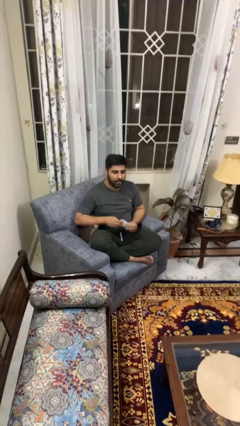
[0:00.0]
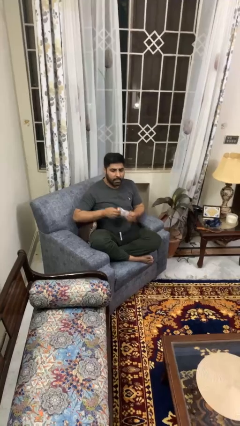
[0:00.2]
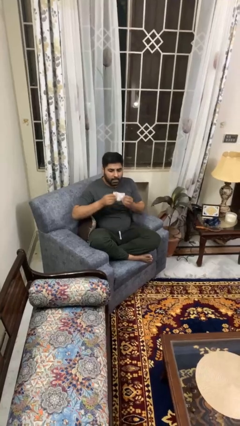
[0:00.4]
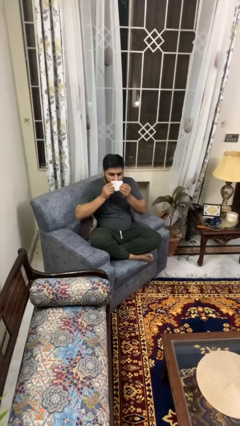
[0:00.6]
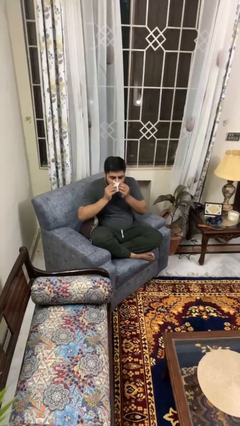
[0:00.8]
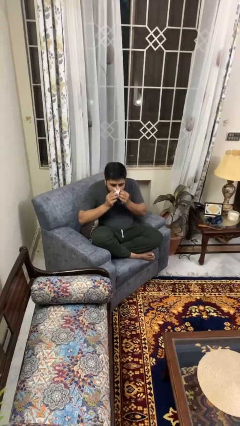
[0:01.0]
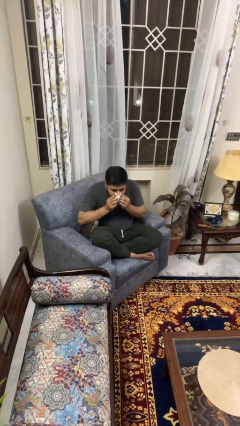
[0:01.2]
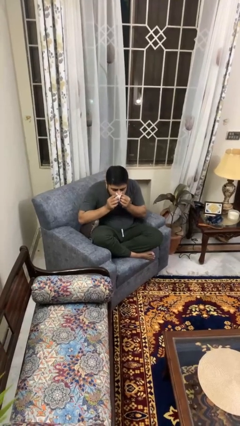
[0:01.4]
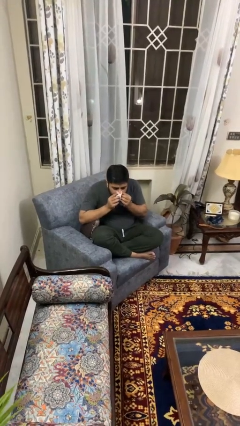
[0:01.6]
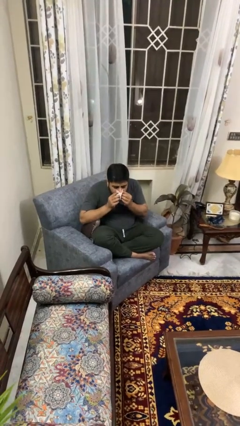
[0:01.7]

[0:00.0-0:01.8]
person blows nose

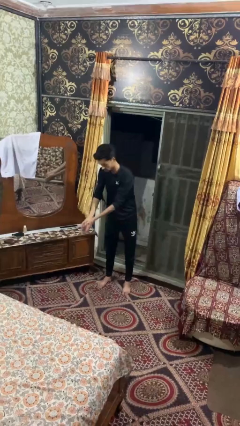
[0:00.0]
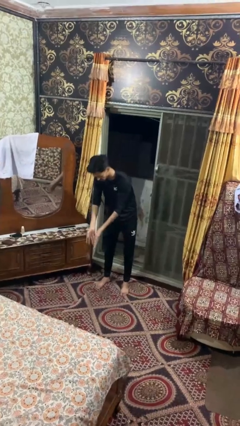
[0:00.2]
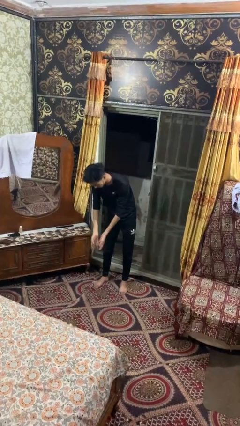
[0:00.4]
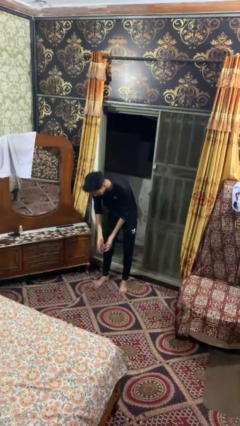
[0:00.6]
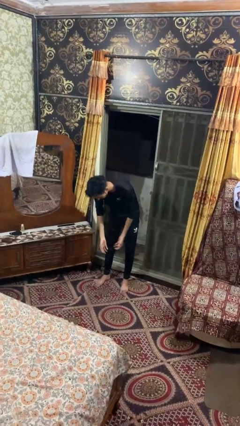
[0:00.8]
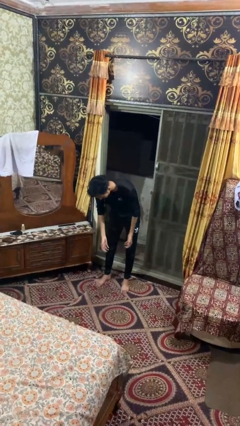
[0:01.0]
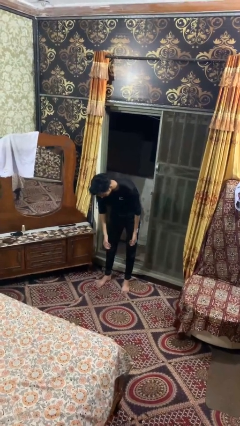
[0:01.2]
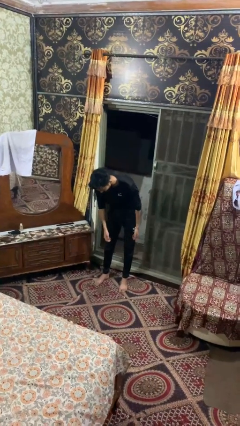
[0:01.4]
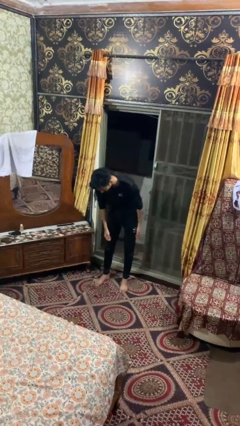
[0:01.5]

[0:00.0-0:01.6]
person catches dropped object

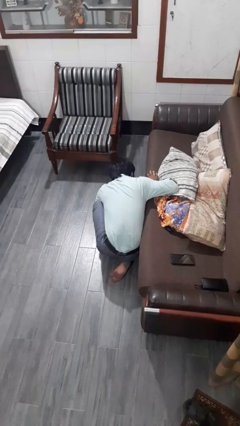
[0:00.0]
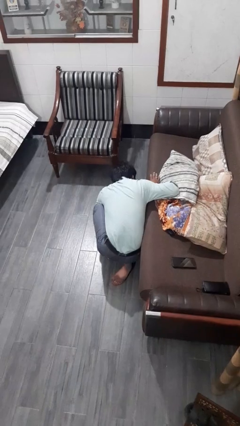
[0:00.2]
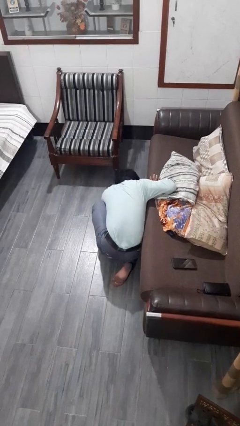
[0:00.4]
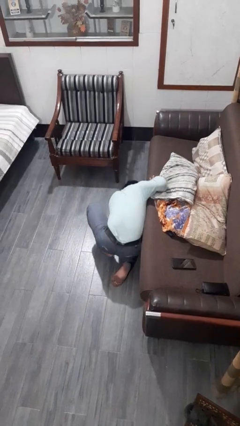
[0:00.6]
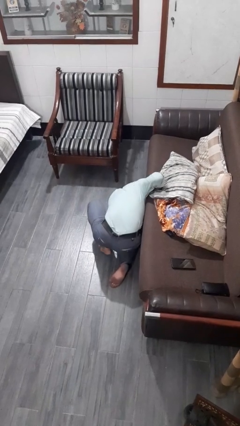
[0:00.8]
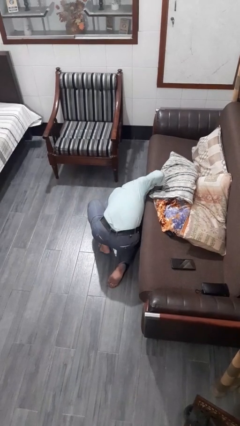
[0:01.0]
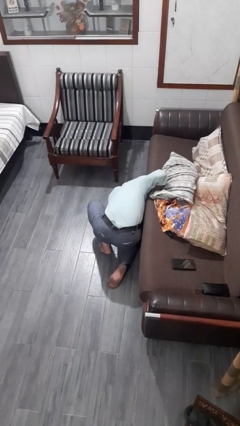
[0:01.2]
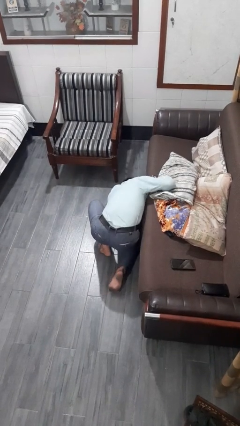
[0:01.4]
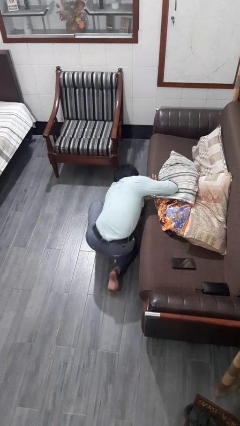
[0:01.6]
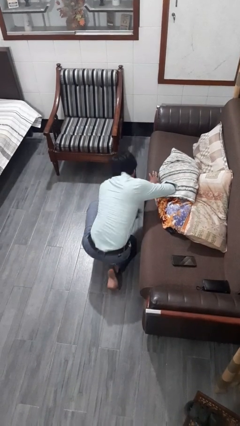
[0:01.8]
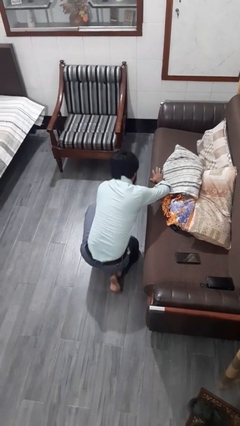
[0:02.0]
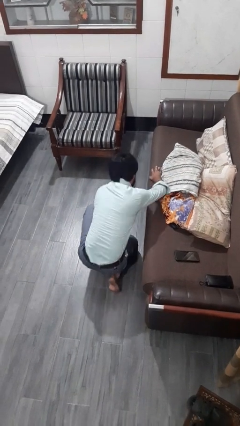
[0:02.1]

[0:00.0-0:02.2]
person searches under couch

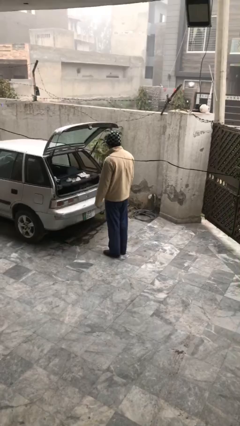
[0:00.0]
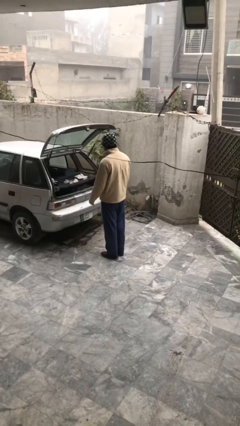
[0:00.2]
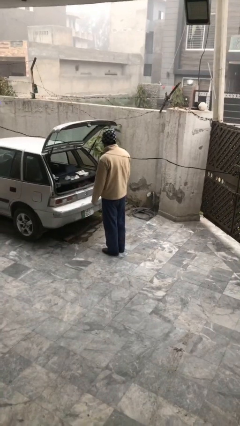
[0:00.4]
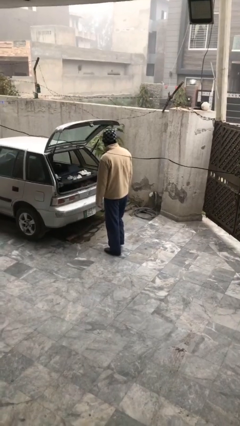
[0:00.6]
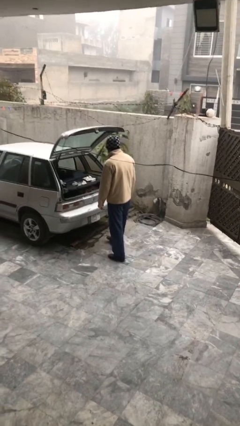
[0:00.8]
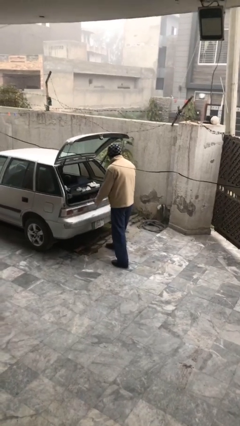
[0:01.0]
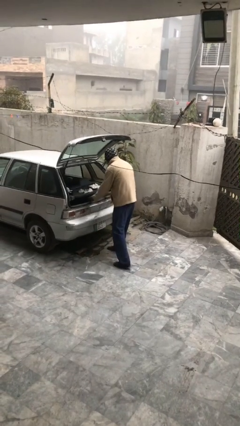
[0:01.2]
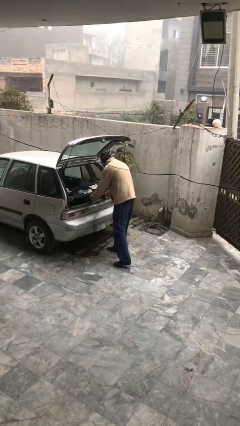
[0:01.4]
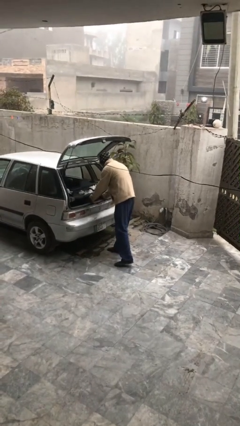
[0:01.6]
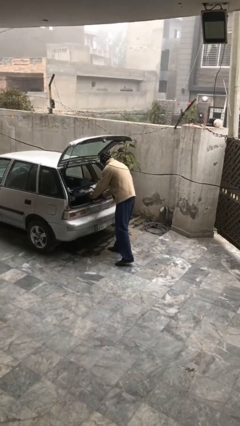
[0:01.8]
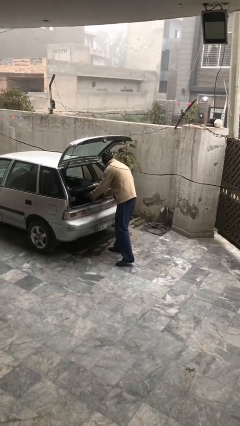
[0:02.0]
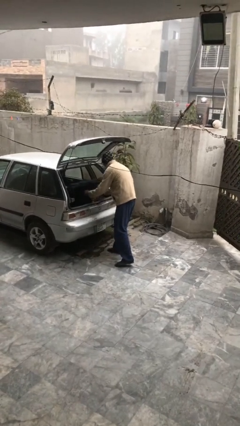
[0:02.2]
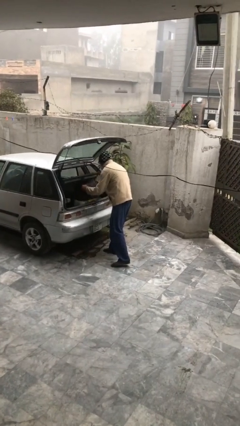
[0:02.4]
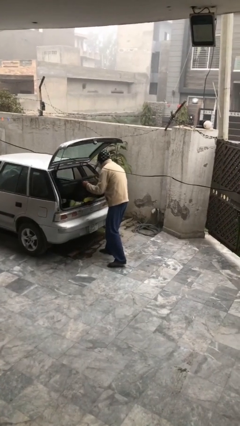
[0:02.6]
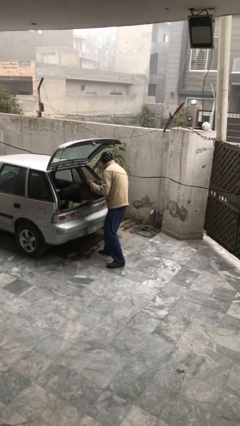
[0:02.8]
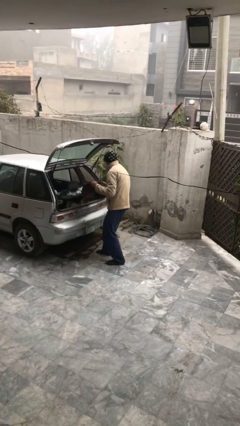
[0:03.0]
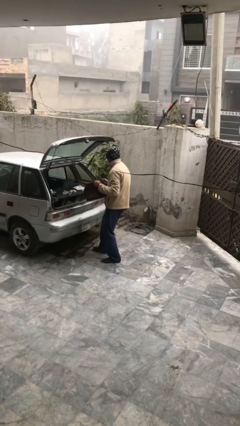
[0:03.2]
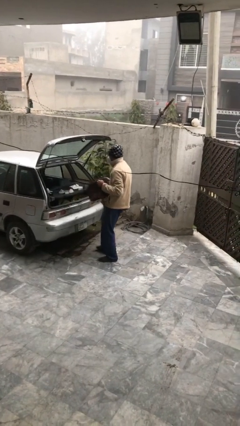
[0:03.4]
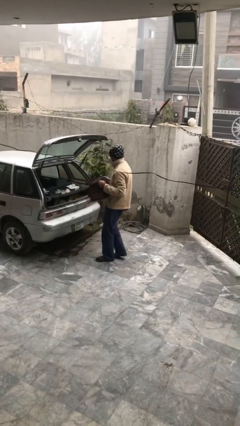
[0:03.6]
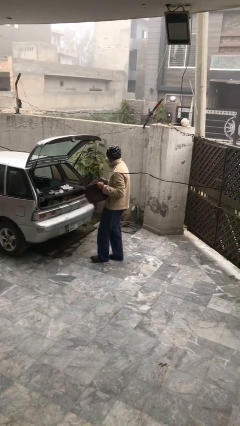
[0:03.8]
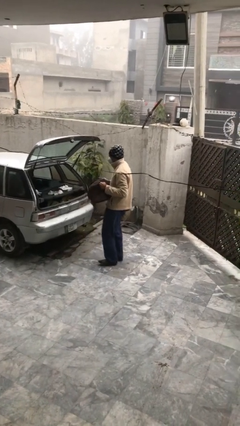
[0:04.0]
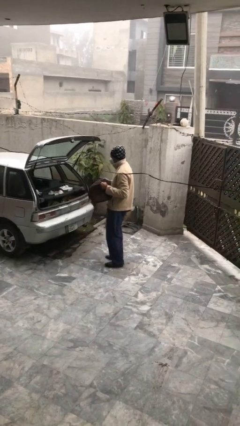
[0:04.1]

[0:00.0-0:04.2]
person unloads car

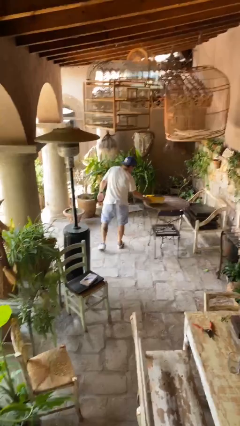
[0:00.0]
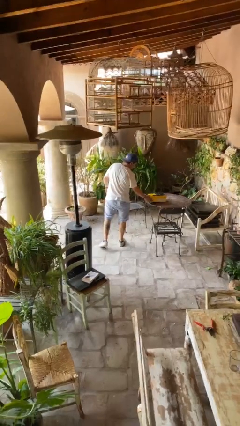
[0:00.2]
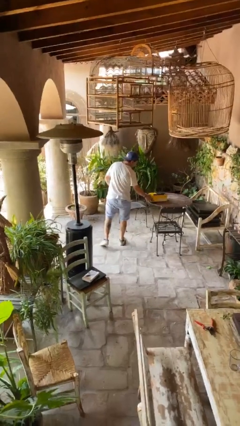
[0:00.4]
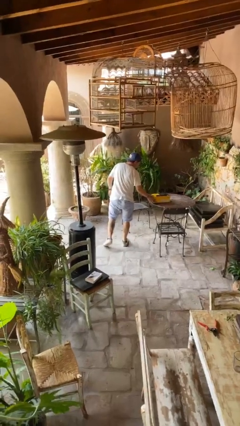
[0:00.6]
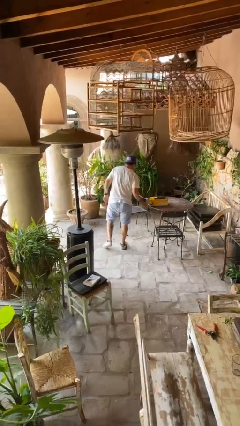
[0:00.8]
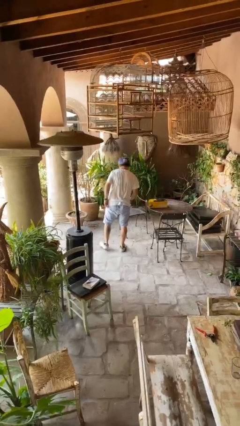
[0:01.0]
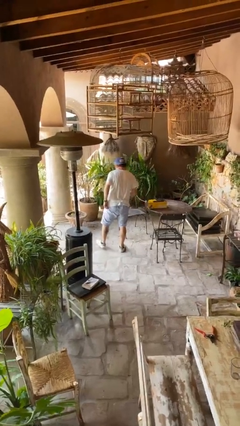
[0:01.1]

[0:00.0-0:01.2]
person puts down object on table

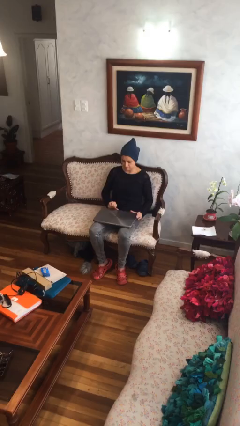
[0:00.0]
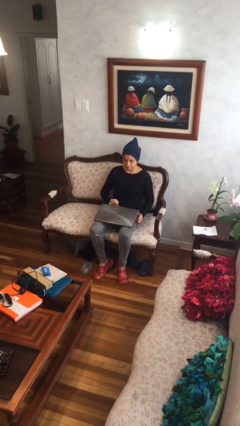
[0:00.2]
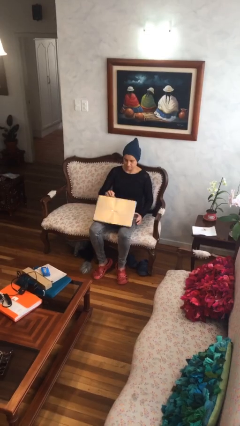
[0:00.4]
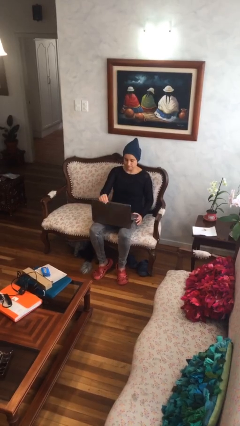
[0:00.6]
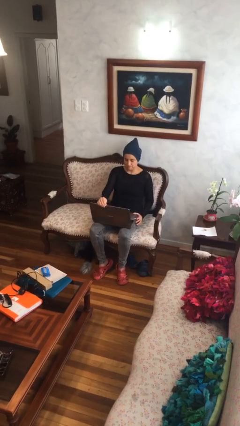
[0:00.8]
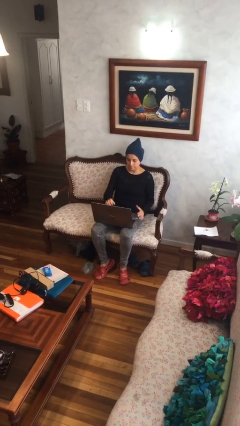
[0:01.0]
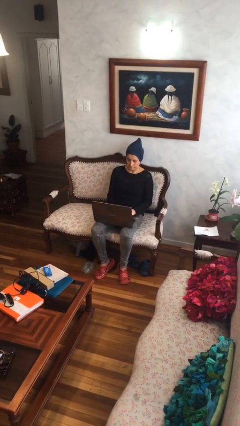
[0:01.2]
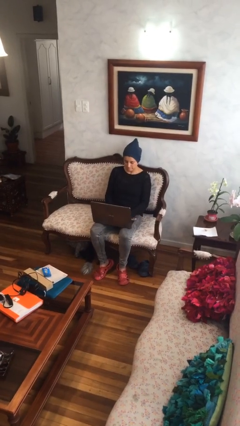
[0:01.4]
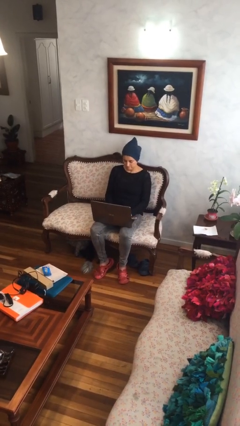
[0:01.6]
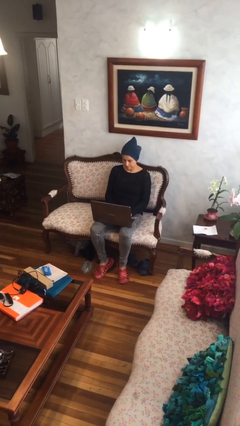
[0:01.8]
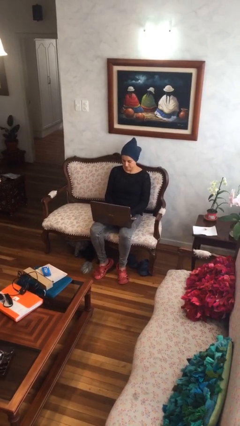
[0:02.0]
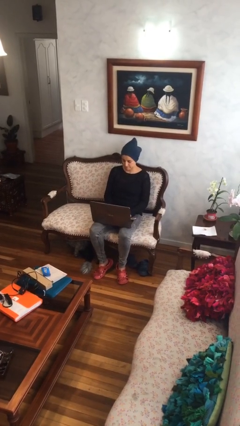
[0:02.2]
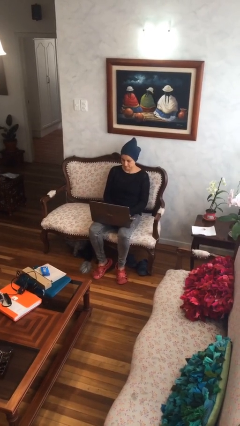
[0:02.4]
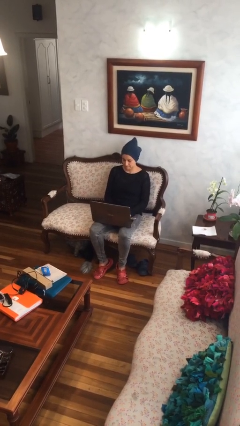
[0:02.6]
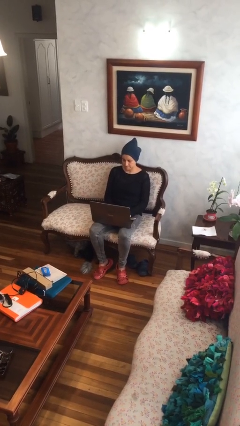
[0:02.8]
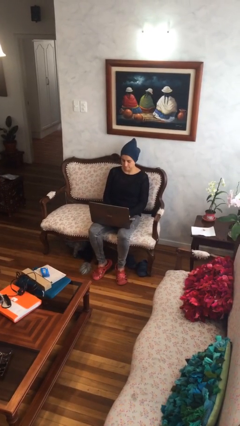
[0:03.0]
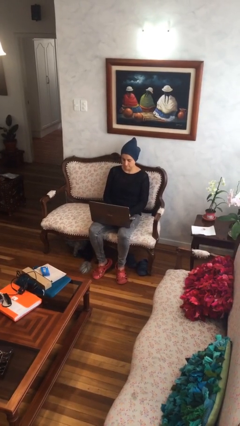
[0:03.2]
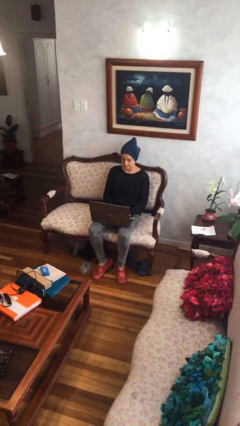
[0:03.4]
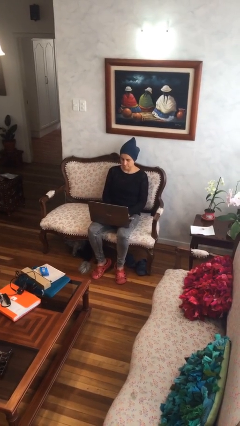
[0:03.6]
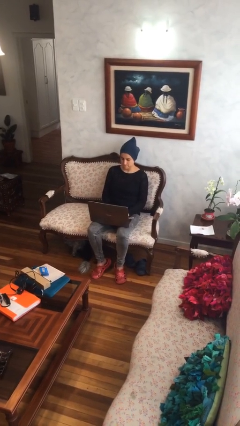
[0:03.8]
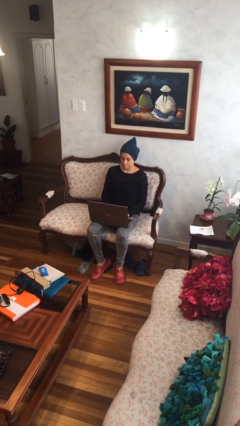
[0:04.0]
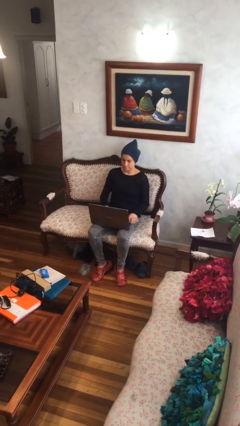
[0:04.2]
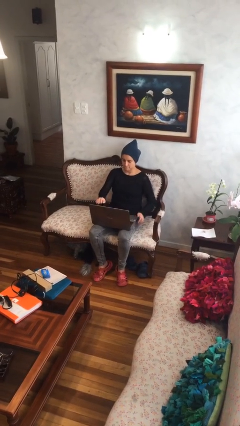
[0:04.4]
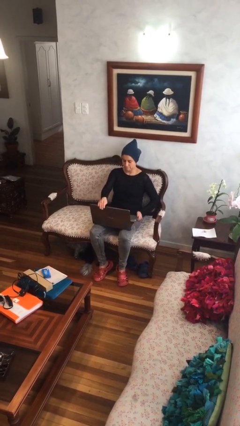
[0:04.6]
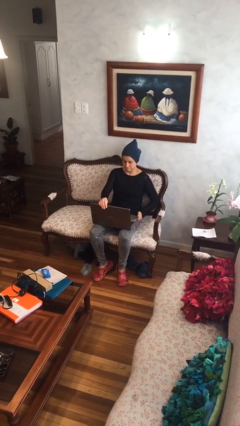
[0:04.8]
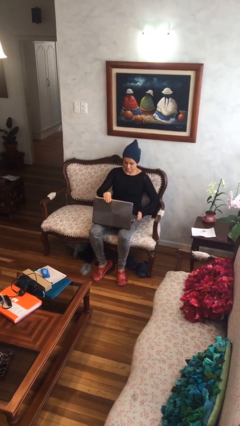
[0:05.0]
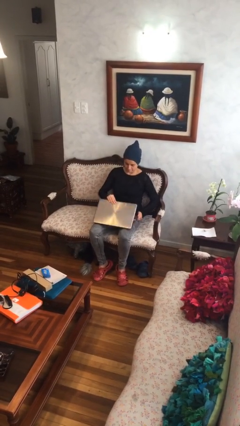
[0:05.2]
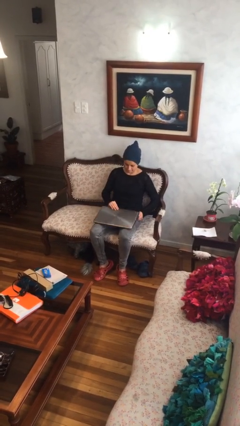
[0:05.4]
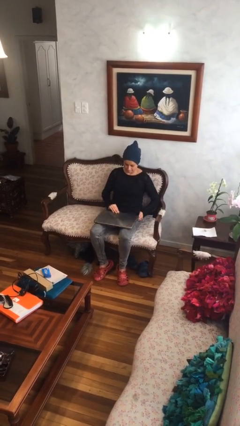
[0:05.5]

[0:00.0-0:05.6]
person interacts with laptop

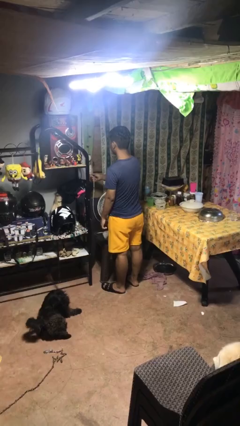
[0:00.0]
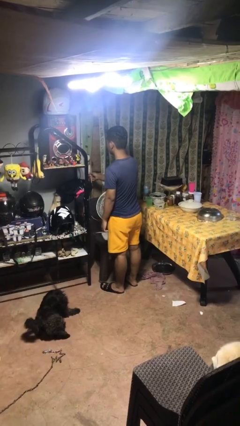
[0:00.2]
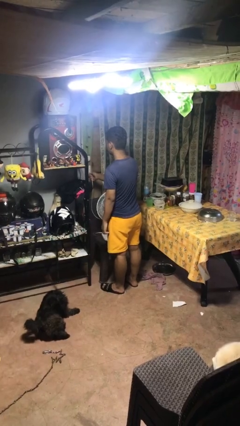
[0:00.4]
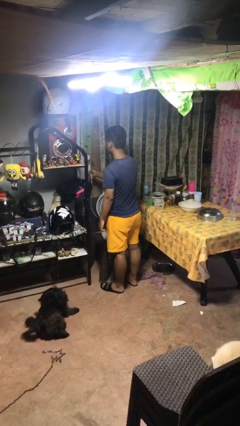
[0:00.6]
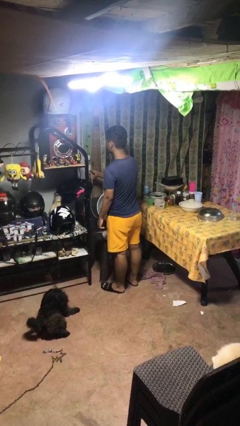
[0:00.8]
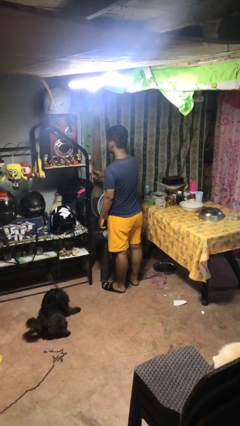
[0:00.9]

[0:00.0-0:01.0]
person plugs into electrical socket
